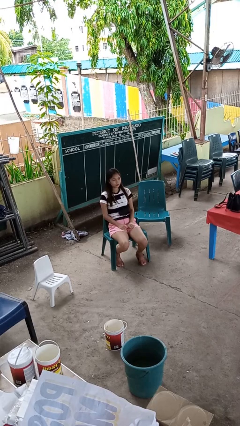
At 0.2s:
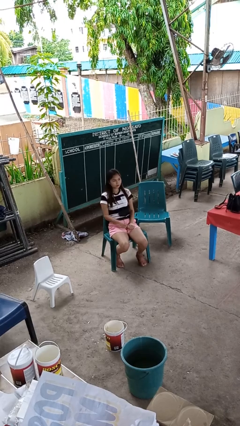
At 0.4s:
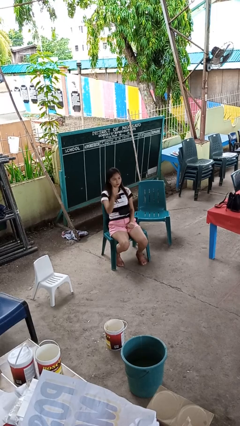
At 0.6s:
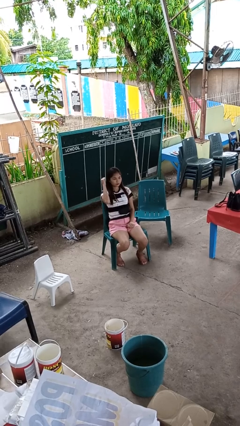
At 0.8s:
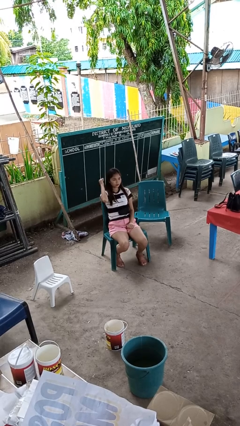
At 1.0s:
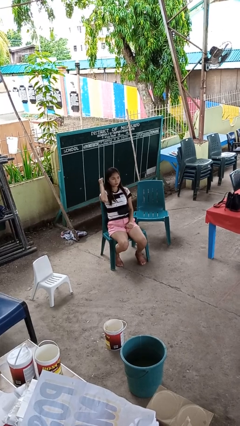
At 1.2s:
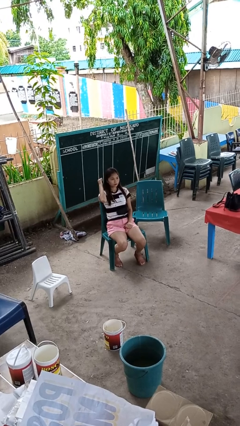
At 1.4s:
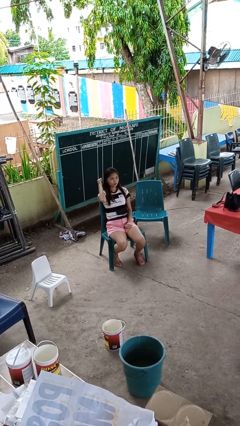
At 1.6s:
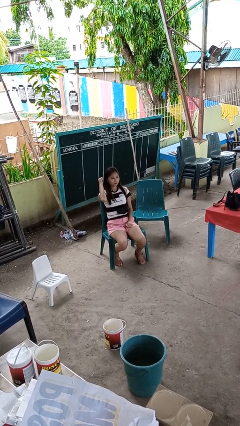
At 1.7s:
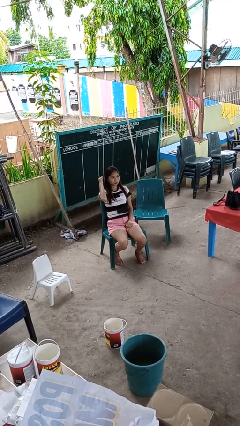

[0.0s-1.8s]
person gestures behind me

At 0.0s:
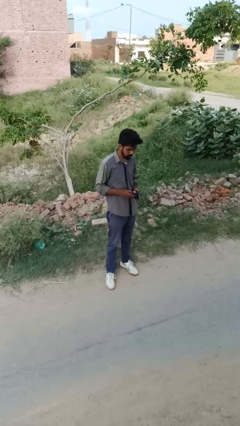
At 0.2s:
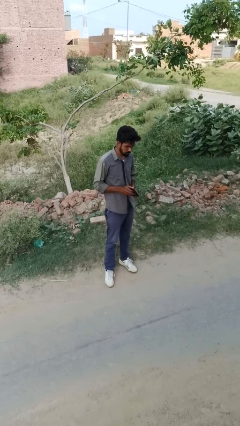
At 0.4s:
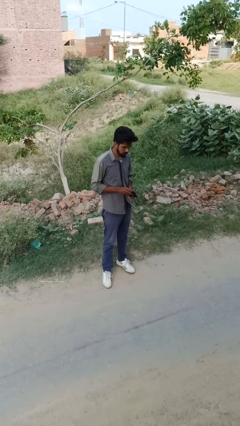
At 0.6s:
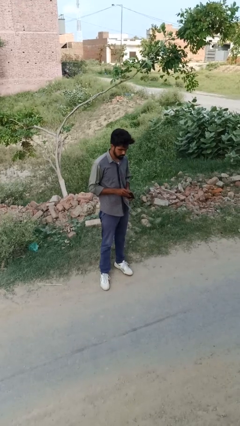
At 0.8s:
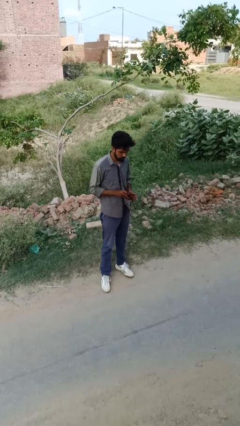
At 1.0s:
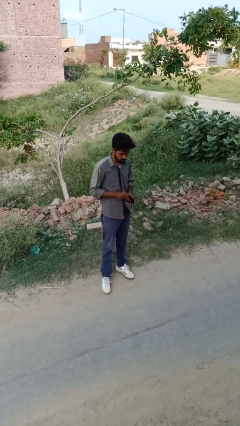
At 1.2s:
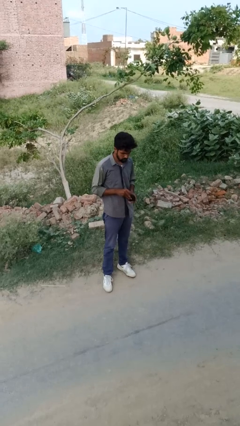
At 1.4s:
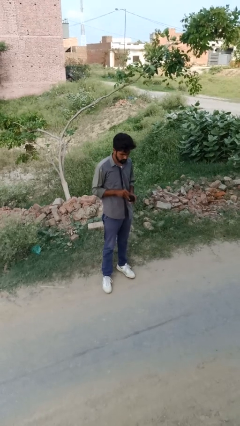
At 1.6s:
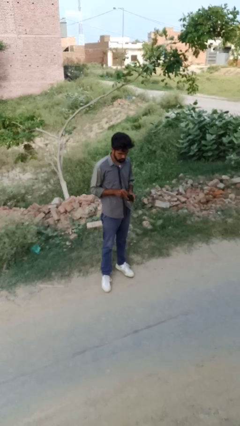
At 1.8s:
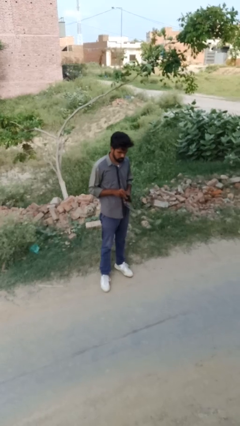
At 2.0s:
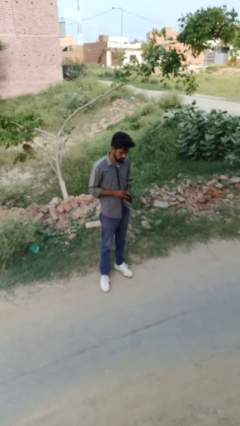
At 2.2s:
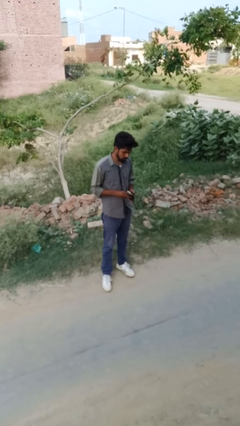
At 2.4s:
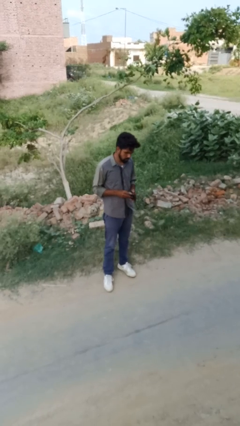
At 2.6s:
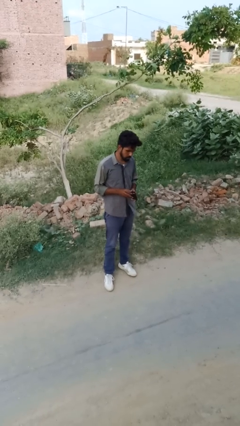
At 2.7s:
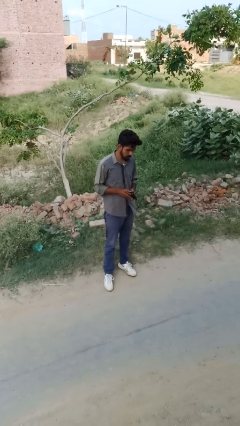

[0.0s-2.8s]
person searches in purse

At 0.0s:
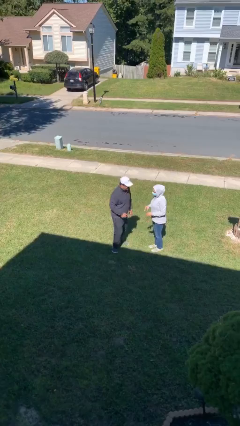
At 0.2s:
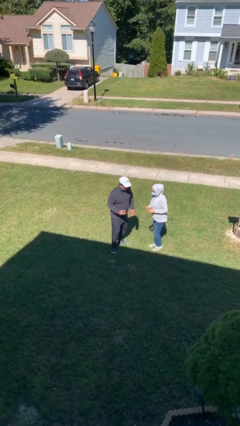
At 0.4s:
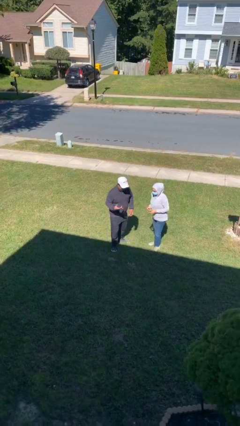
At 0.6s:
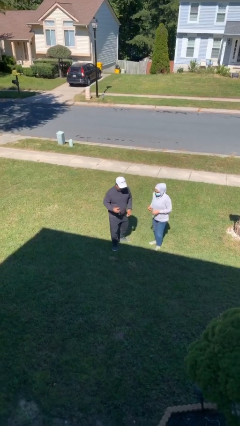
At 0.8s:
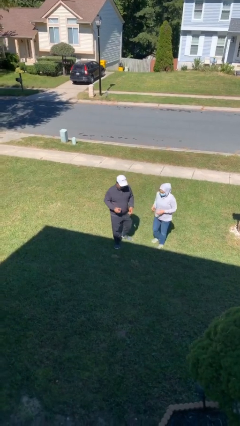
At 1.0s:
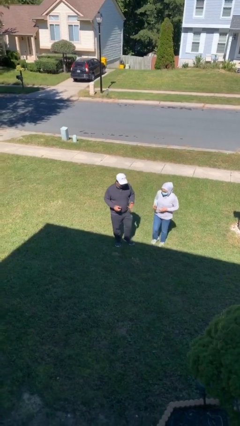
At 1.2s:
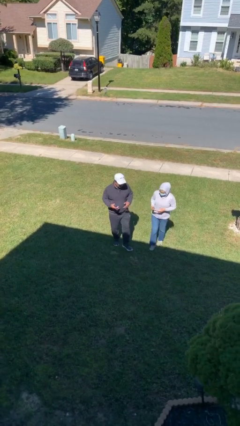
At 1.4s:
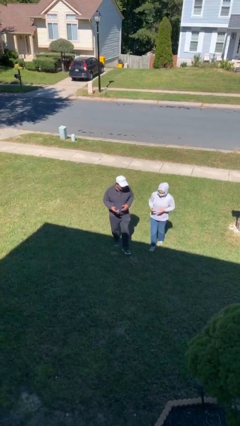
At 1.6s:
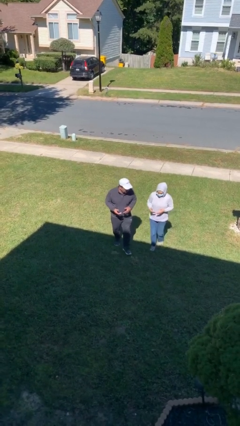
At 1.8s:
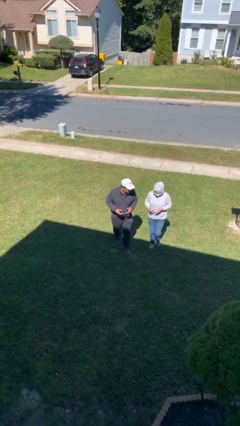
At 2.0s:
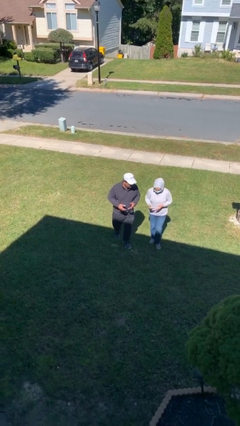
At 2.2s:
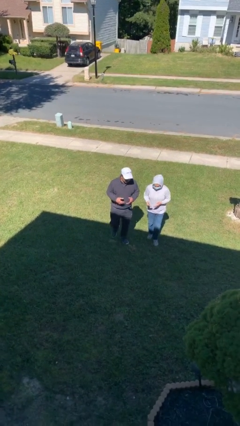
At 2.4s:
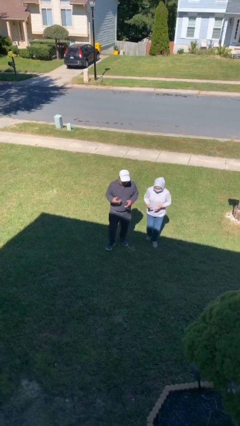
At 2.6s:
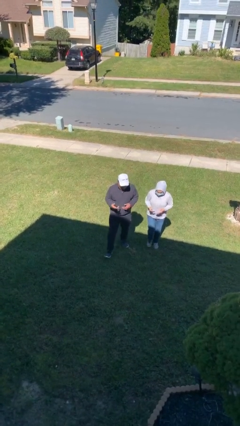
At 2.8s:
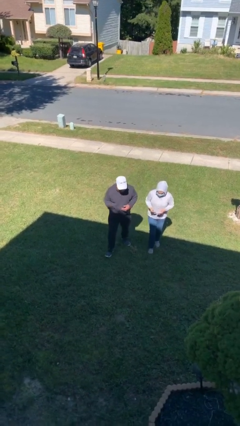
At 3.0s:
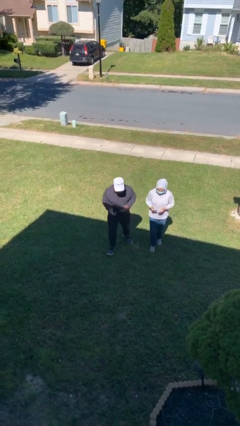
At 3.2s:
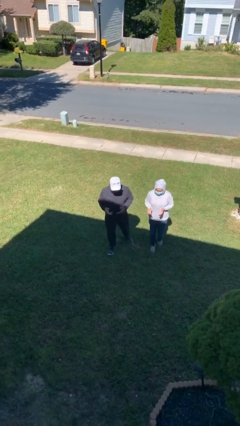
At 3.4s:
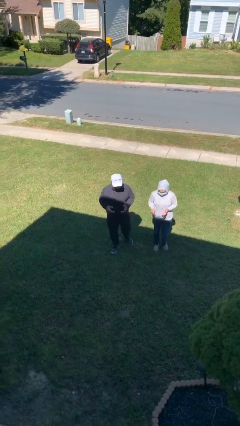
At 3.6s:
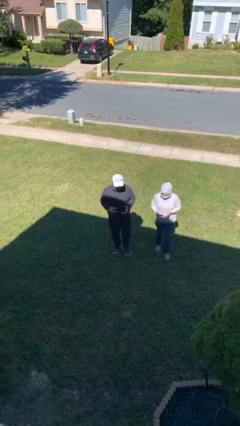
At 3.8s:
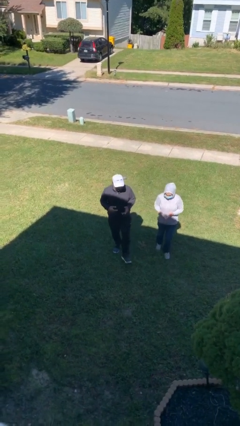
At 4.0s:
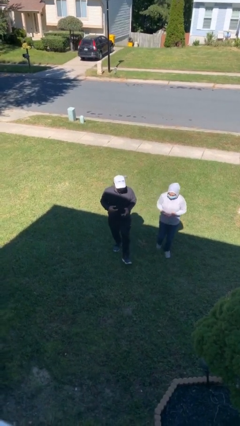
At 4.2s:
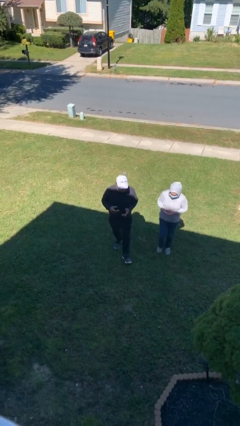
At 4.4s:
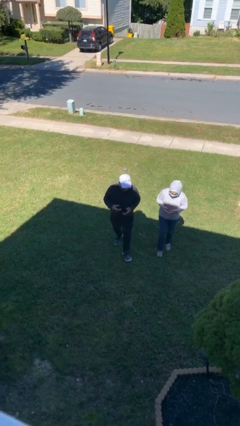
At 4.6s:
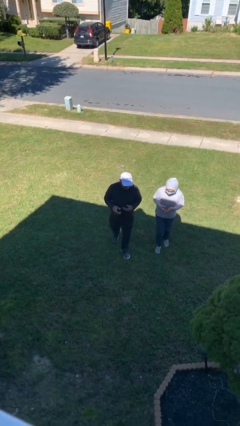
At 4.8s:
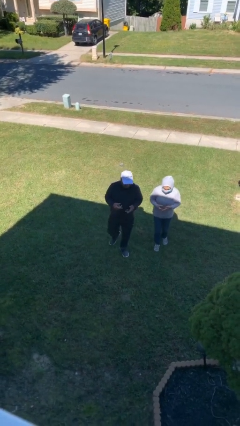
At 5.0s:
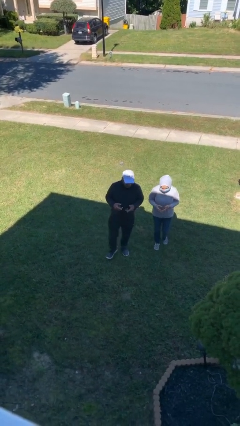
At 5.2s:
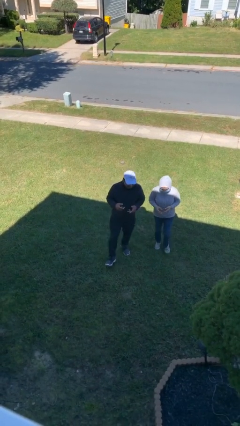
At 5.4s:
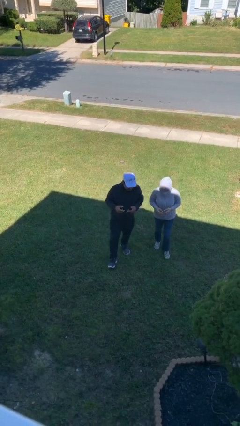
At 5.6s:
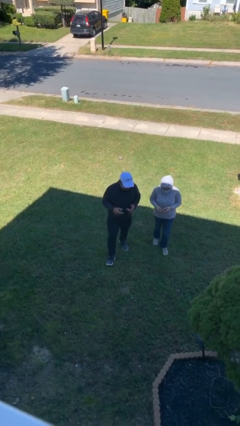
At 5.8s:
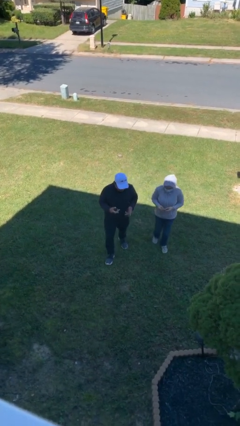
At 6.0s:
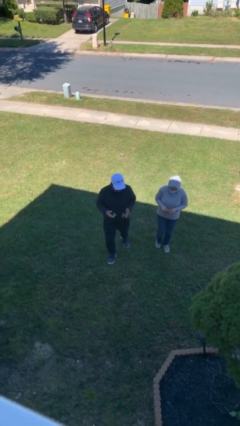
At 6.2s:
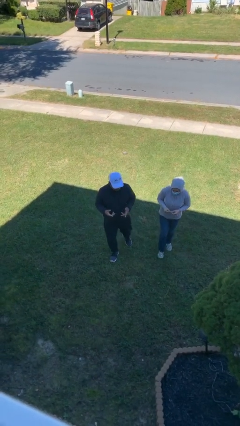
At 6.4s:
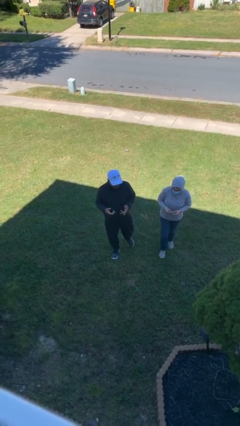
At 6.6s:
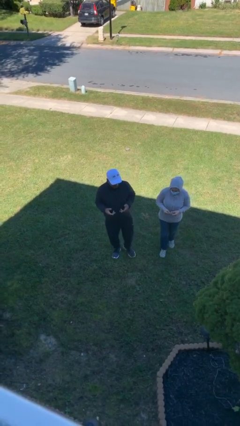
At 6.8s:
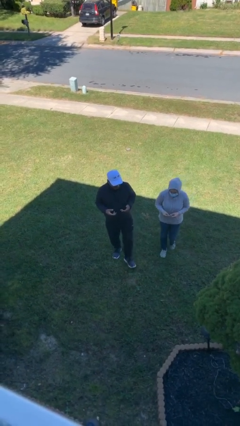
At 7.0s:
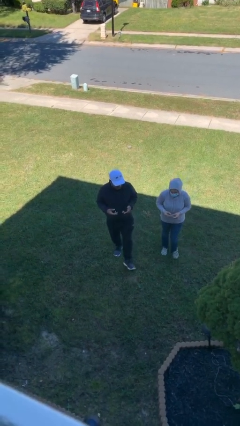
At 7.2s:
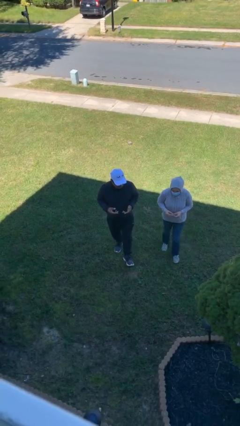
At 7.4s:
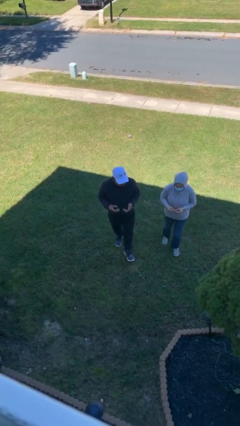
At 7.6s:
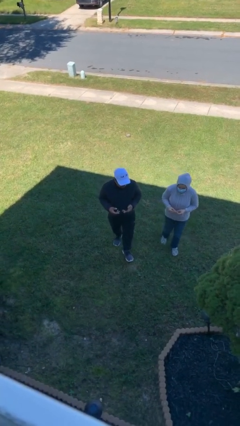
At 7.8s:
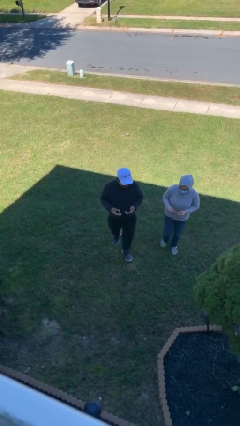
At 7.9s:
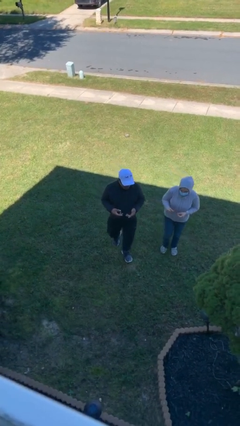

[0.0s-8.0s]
person talks to person

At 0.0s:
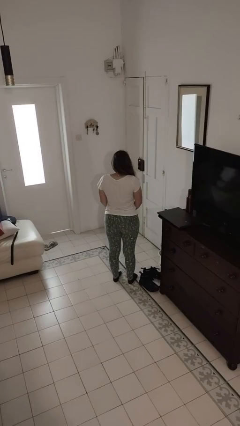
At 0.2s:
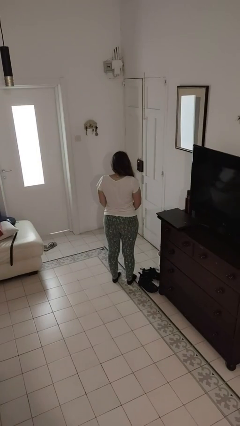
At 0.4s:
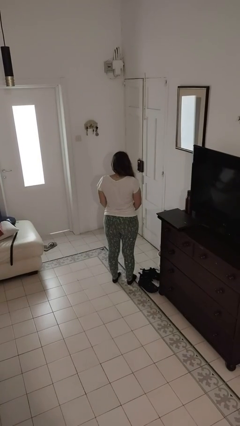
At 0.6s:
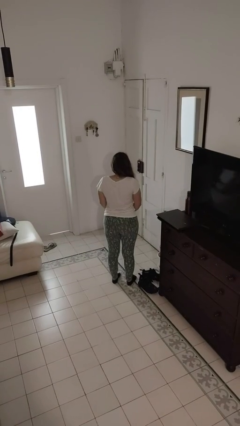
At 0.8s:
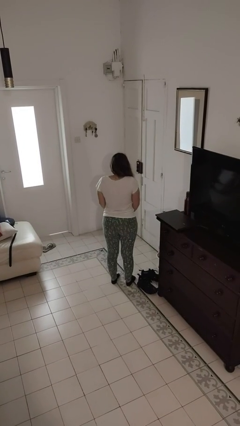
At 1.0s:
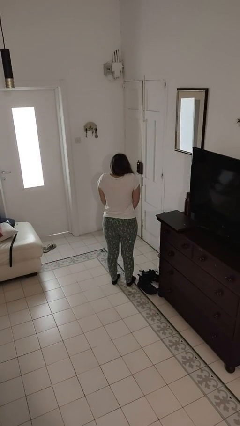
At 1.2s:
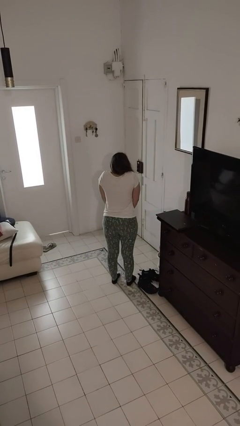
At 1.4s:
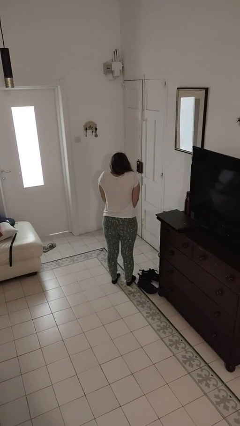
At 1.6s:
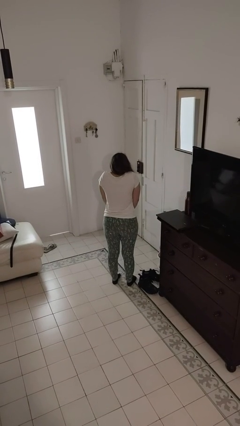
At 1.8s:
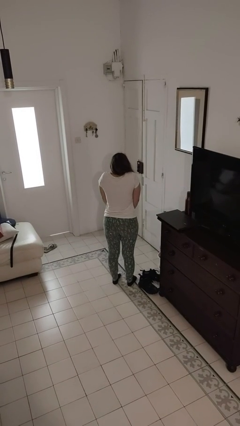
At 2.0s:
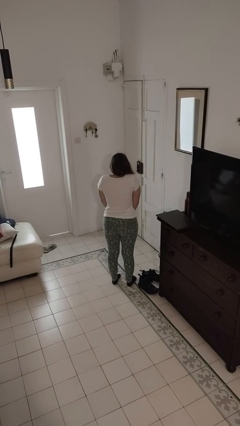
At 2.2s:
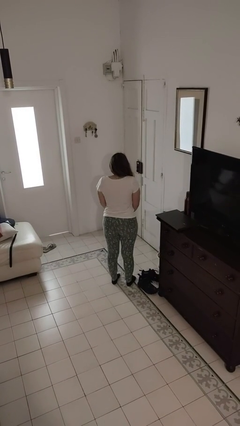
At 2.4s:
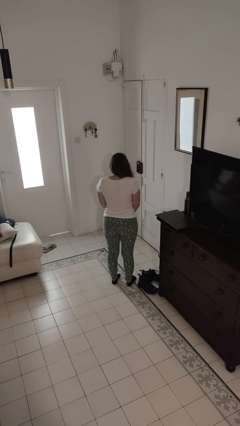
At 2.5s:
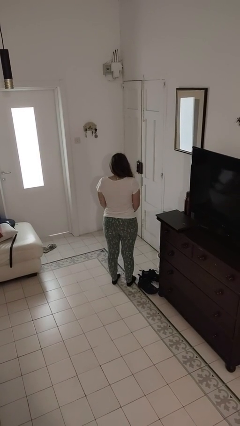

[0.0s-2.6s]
person shrugs

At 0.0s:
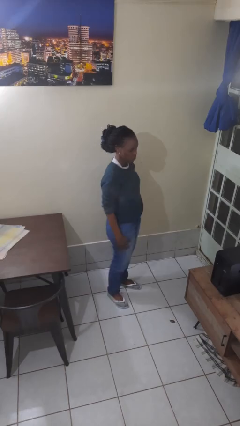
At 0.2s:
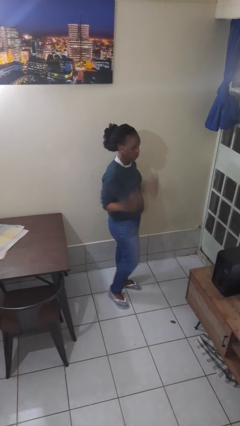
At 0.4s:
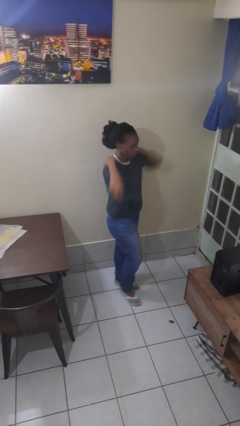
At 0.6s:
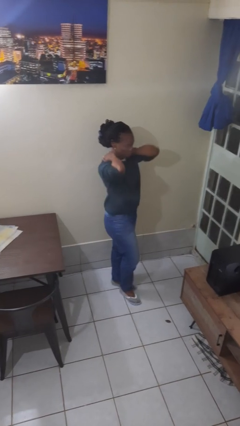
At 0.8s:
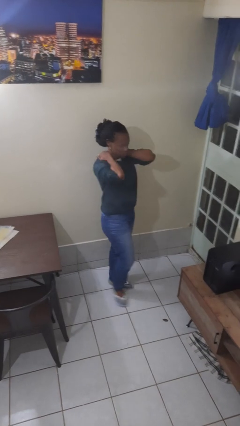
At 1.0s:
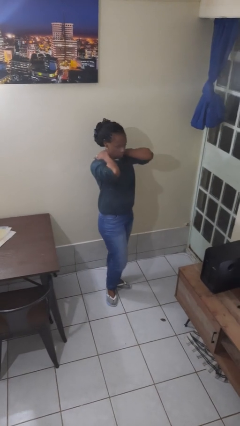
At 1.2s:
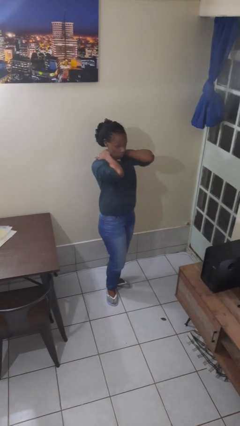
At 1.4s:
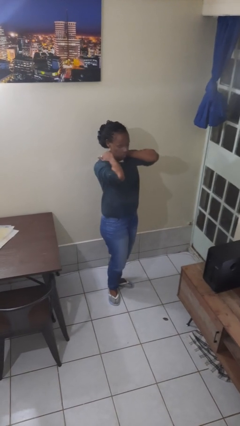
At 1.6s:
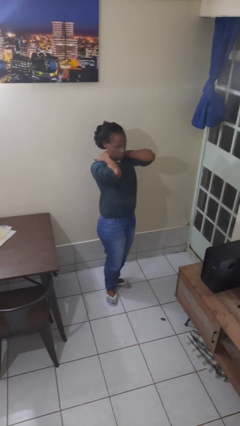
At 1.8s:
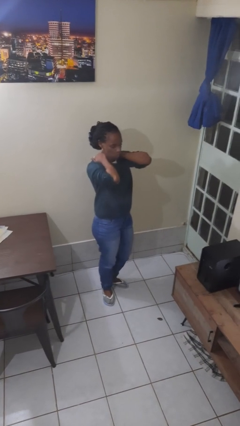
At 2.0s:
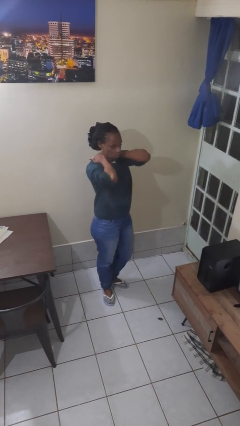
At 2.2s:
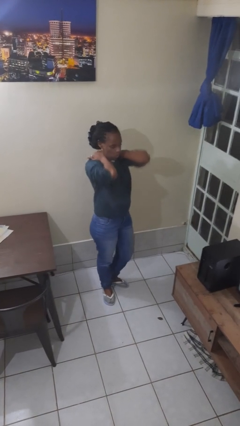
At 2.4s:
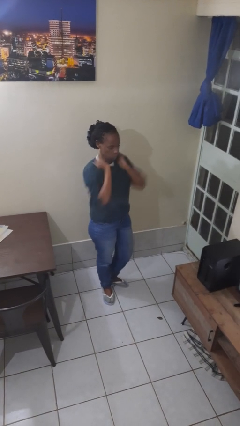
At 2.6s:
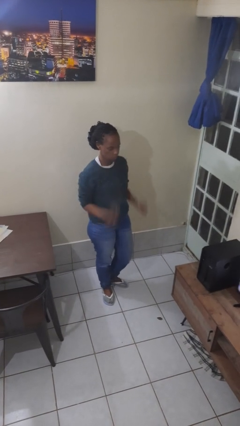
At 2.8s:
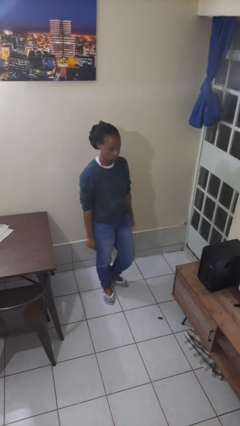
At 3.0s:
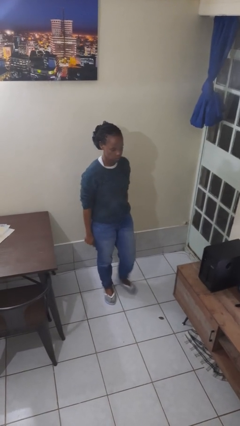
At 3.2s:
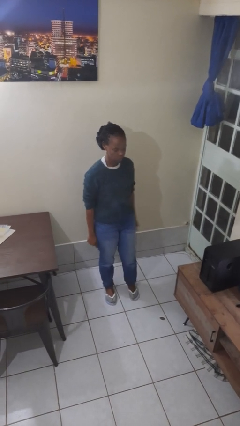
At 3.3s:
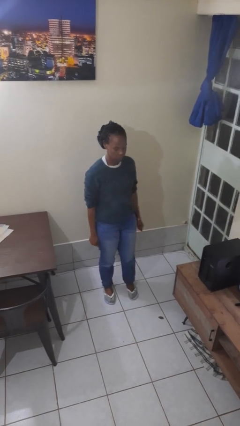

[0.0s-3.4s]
person rubs neck
